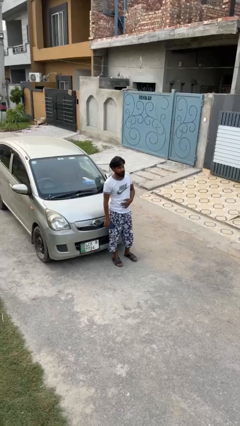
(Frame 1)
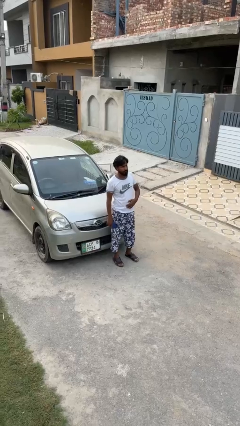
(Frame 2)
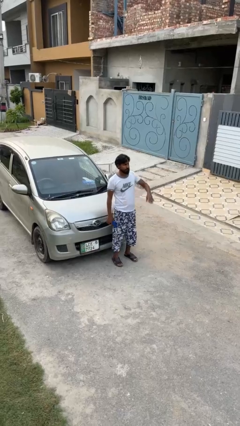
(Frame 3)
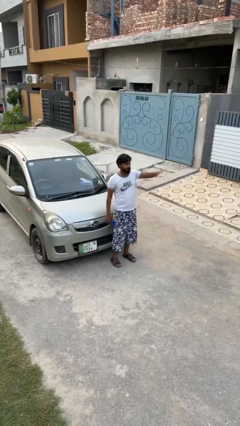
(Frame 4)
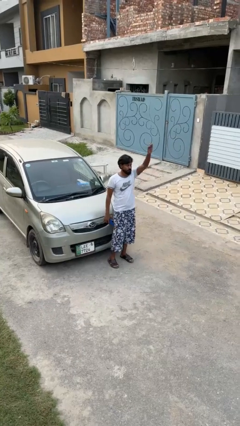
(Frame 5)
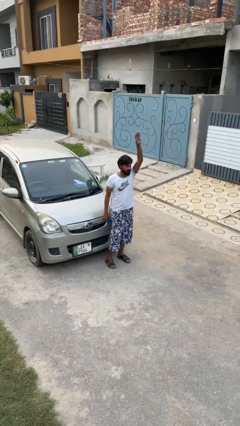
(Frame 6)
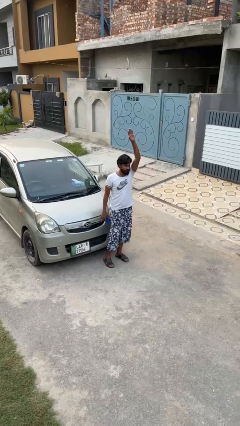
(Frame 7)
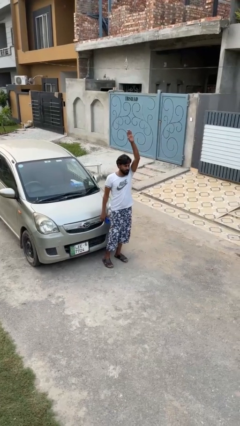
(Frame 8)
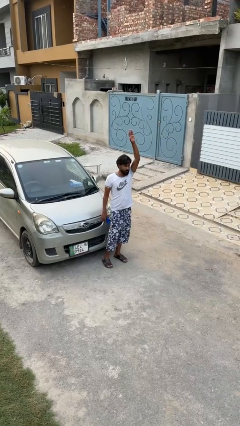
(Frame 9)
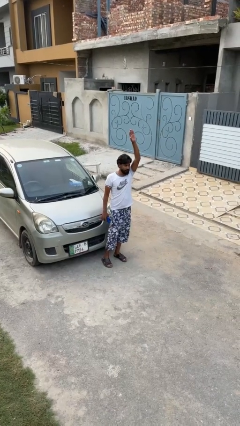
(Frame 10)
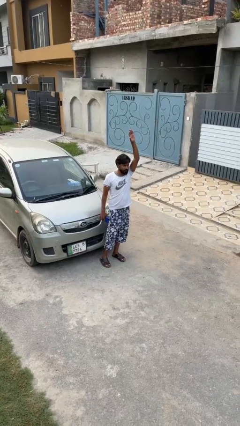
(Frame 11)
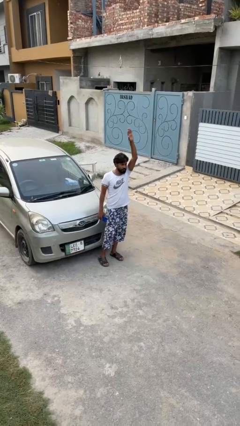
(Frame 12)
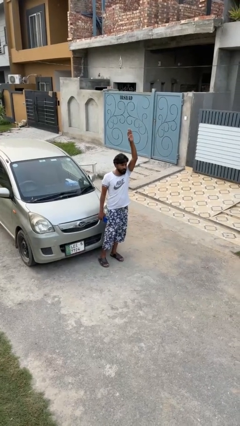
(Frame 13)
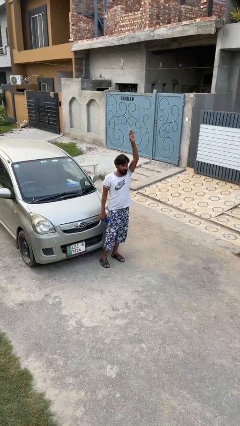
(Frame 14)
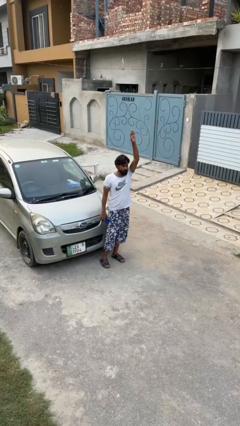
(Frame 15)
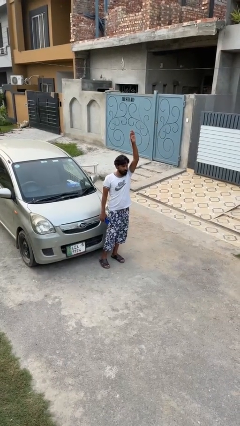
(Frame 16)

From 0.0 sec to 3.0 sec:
person gestures raise hand

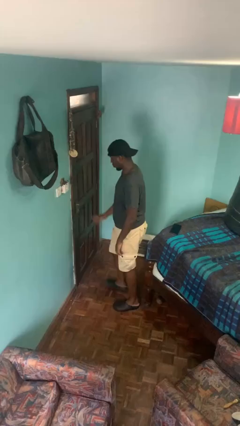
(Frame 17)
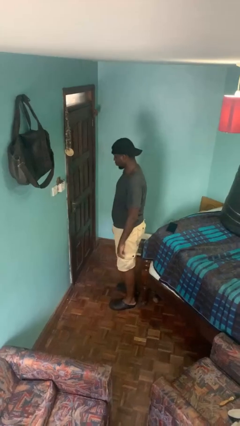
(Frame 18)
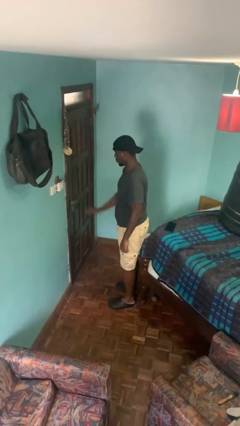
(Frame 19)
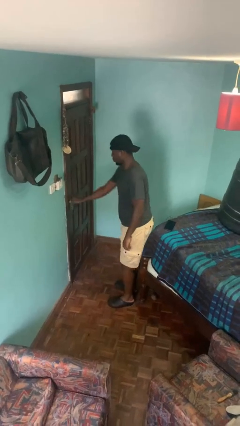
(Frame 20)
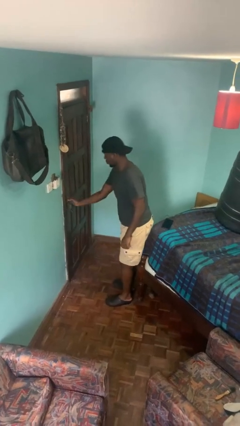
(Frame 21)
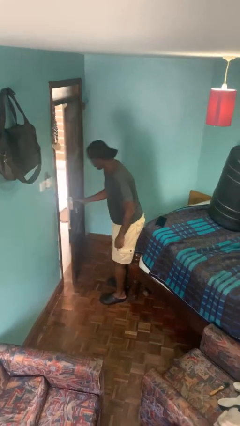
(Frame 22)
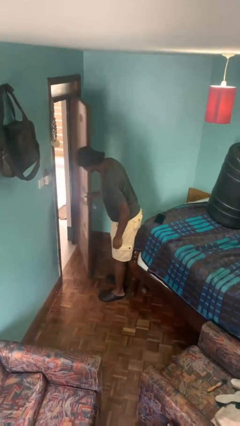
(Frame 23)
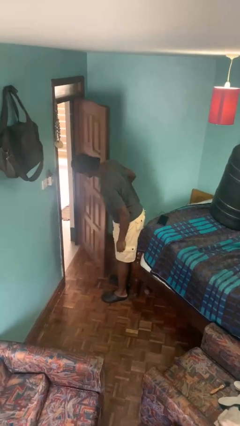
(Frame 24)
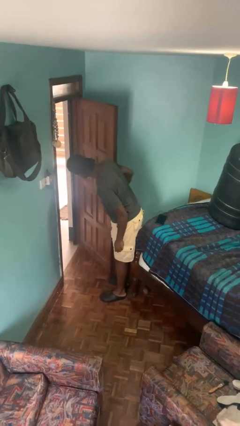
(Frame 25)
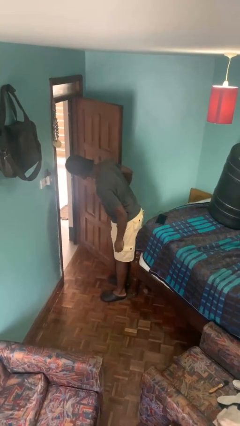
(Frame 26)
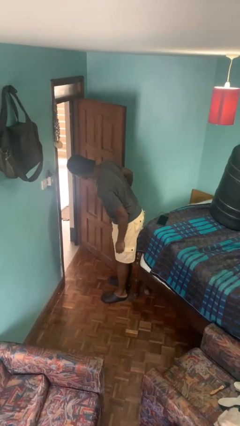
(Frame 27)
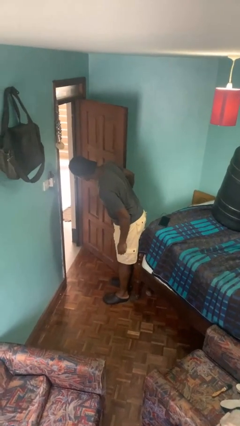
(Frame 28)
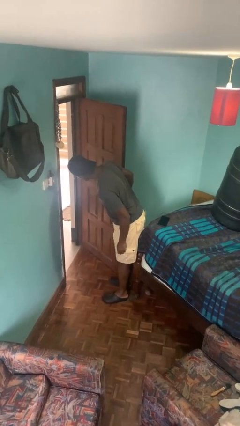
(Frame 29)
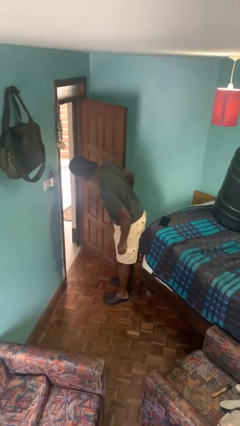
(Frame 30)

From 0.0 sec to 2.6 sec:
person opens facility door

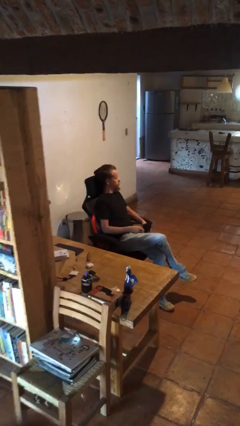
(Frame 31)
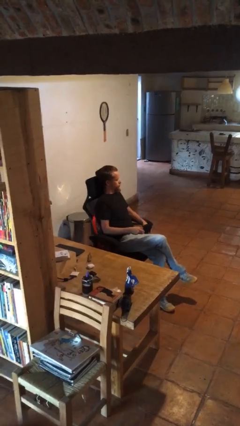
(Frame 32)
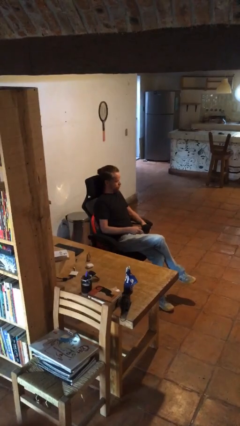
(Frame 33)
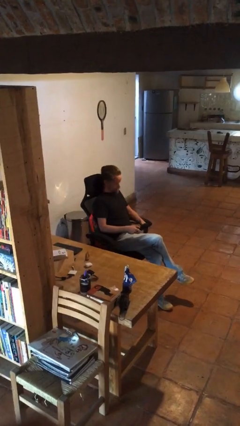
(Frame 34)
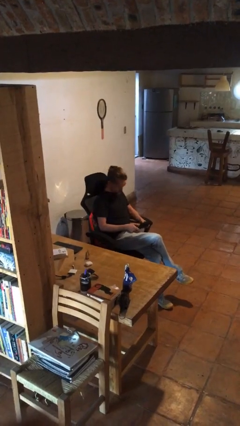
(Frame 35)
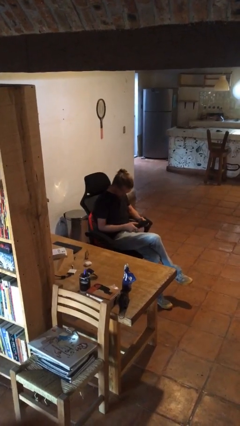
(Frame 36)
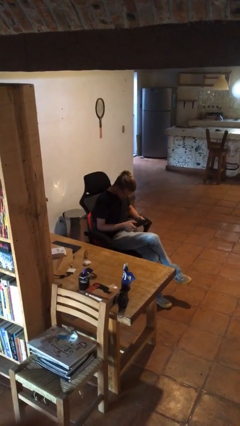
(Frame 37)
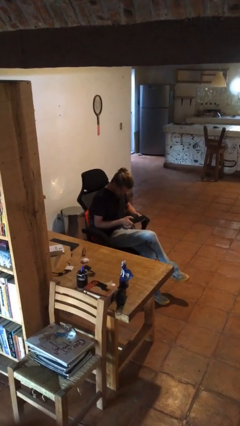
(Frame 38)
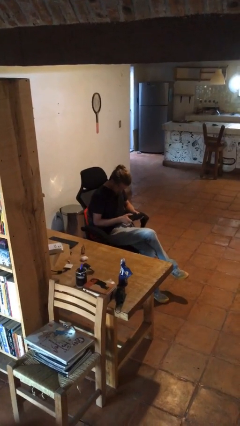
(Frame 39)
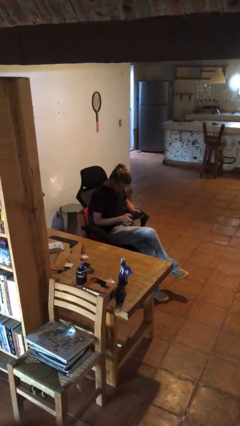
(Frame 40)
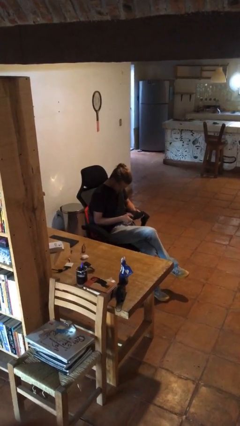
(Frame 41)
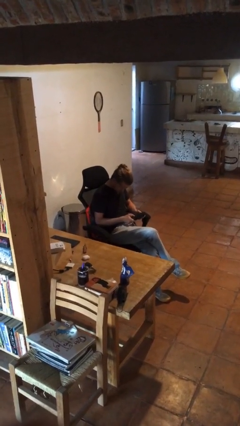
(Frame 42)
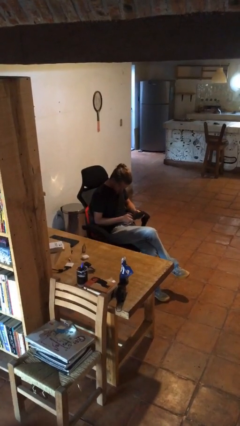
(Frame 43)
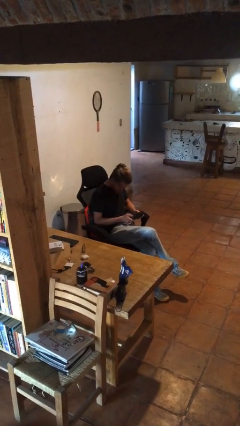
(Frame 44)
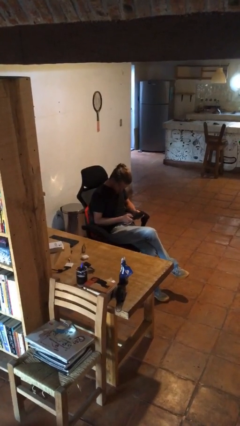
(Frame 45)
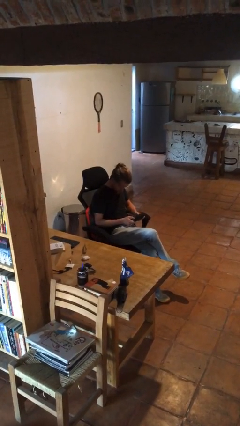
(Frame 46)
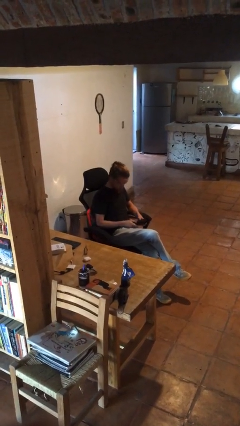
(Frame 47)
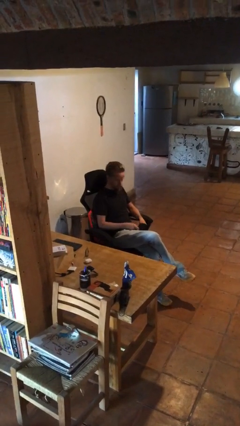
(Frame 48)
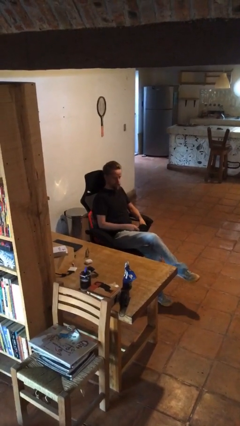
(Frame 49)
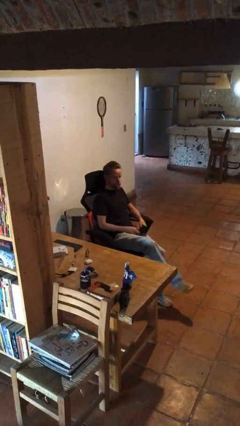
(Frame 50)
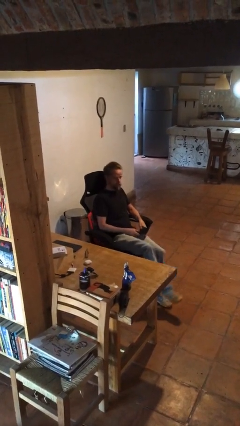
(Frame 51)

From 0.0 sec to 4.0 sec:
person interacts with handheld game

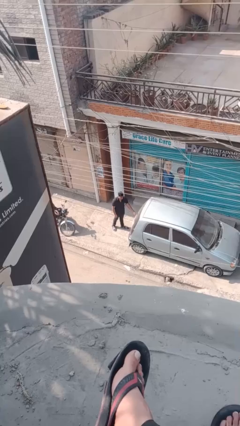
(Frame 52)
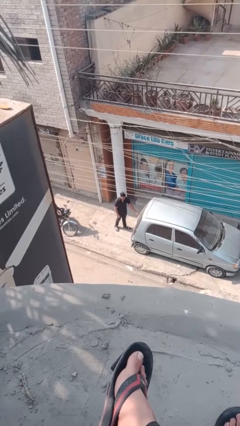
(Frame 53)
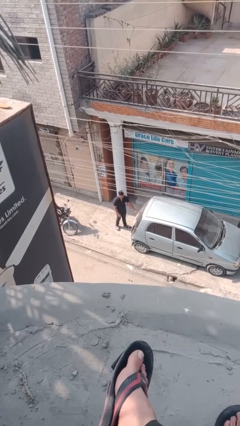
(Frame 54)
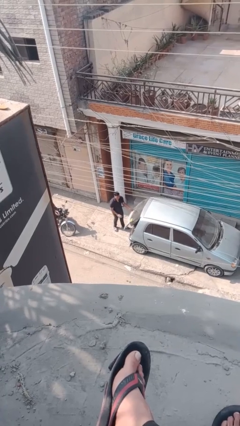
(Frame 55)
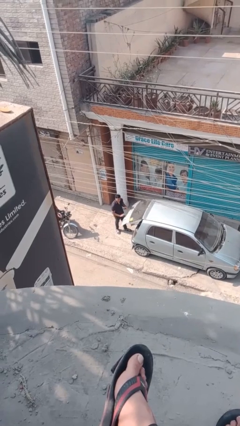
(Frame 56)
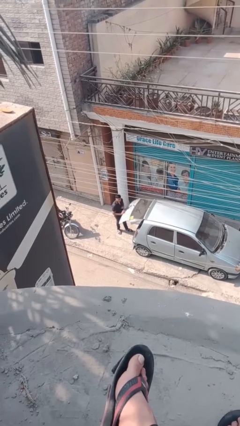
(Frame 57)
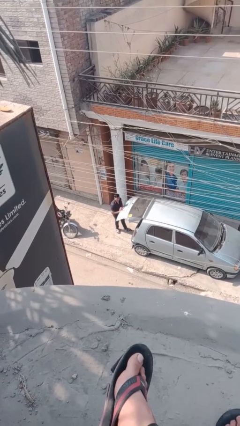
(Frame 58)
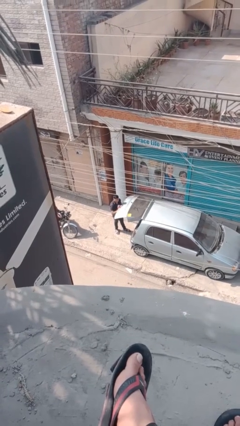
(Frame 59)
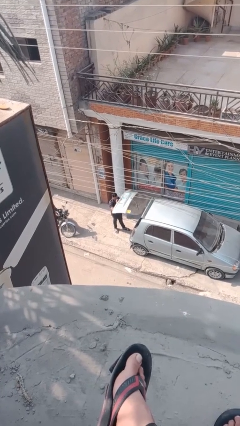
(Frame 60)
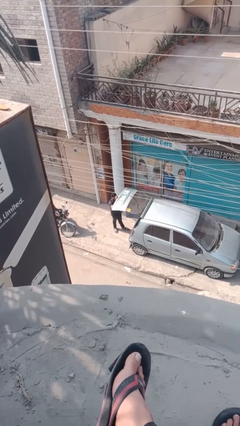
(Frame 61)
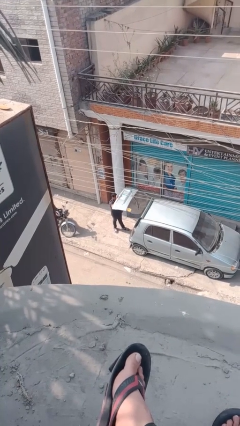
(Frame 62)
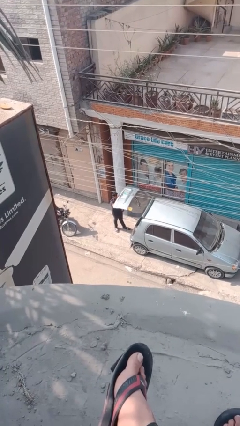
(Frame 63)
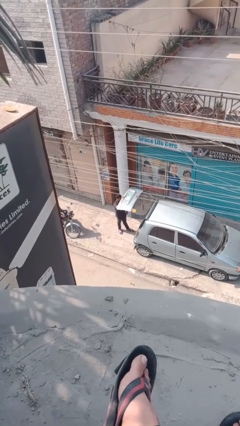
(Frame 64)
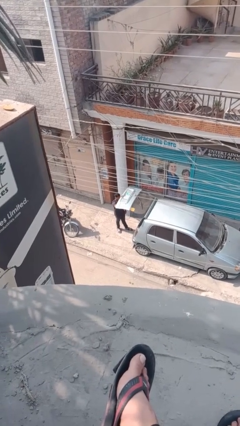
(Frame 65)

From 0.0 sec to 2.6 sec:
person opens car trunk

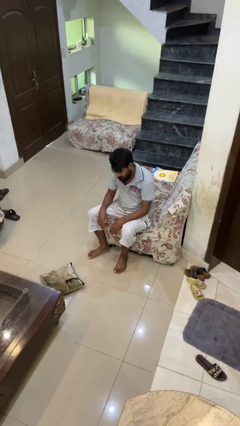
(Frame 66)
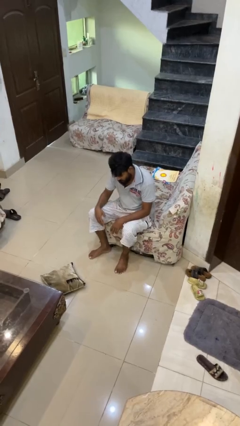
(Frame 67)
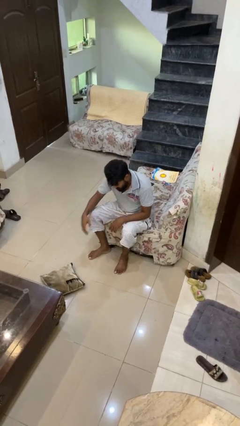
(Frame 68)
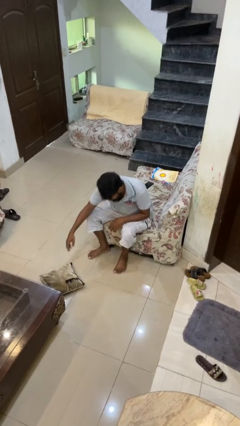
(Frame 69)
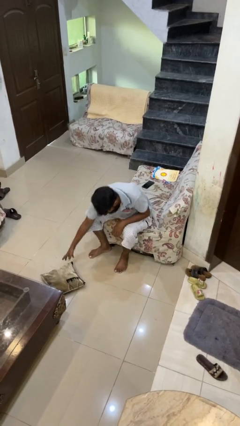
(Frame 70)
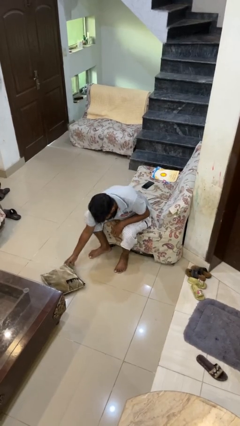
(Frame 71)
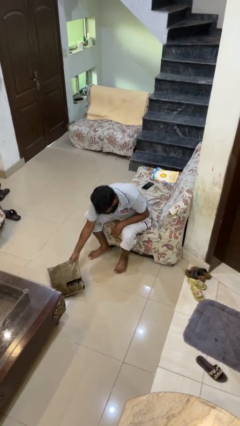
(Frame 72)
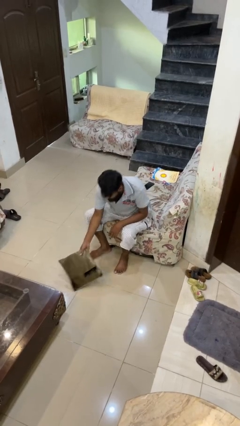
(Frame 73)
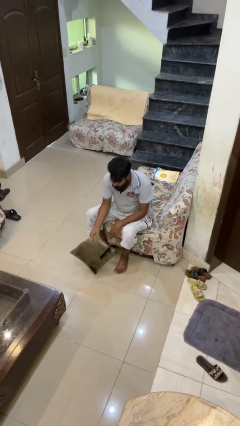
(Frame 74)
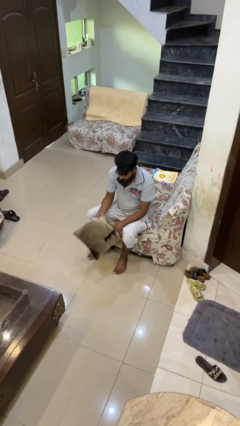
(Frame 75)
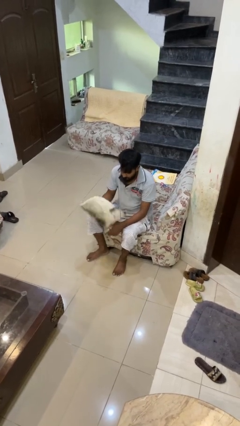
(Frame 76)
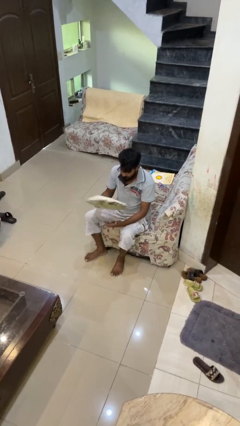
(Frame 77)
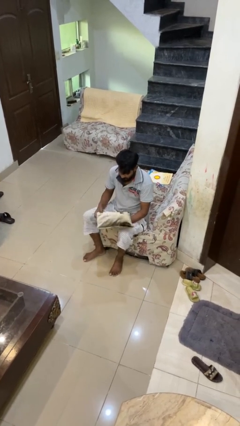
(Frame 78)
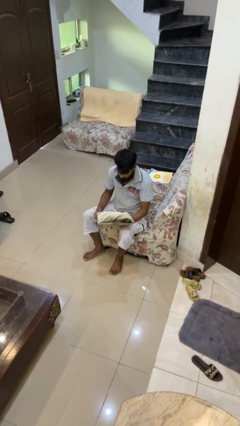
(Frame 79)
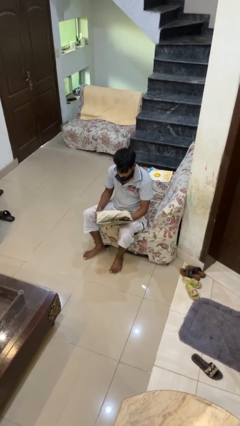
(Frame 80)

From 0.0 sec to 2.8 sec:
person picks up object from floor

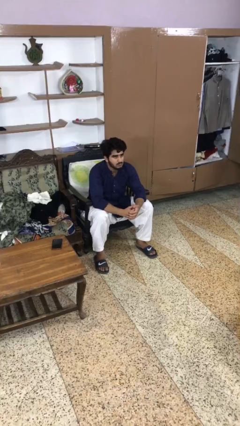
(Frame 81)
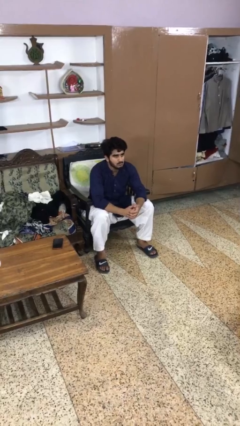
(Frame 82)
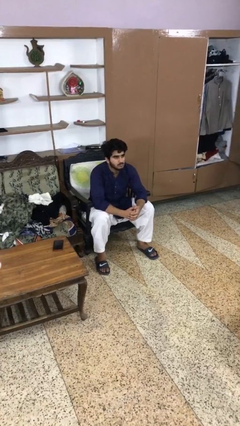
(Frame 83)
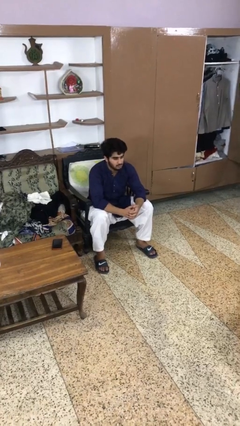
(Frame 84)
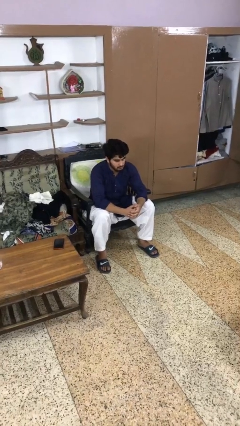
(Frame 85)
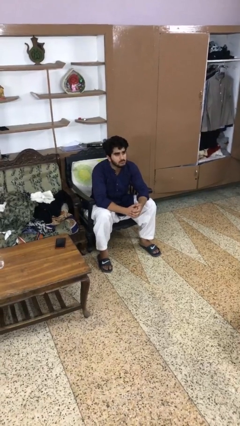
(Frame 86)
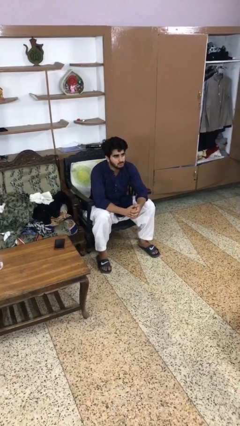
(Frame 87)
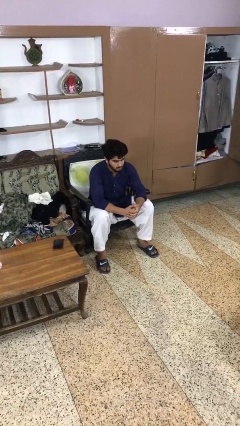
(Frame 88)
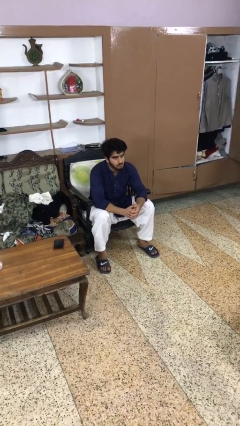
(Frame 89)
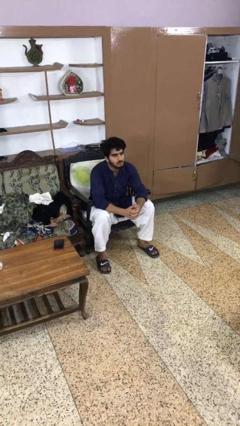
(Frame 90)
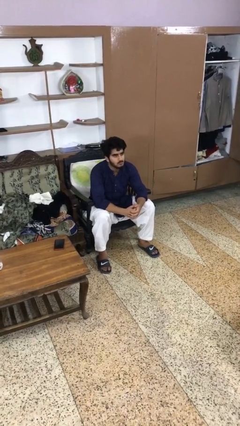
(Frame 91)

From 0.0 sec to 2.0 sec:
person nods head
